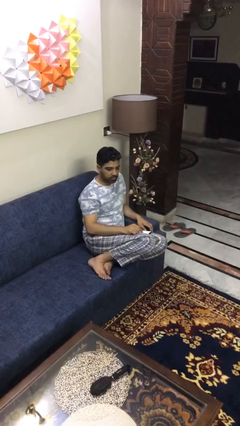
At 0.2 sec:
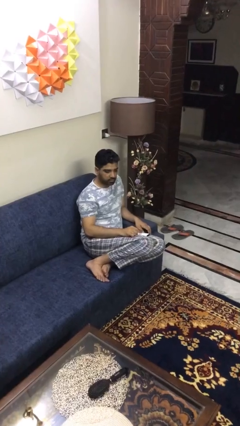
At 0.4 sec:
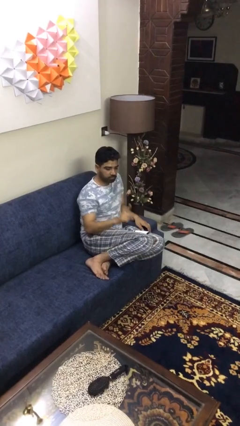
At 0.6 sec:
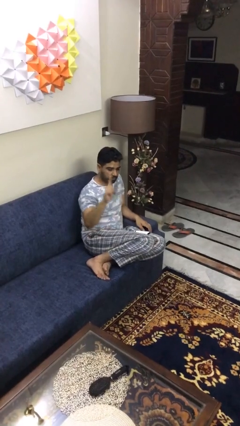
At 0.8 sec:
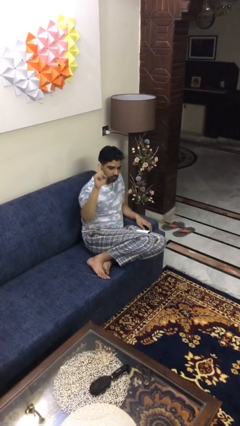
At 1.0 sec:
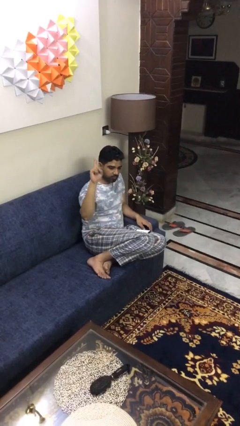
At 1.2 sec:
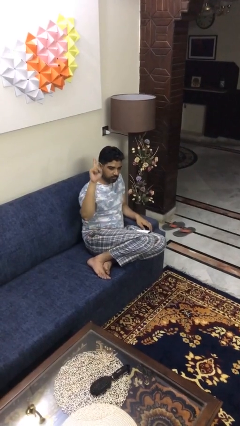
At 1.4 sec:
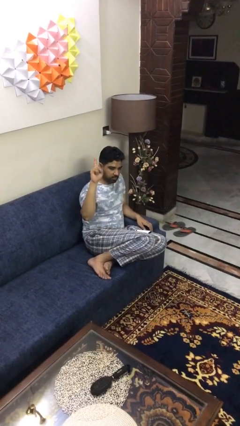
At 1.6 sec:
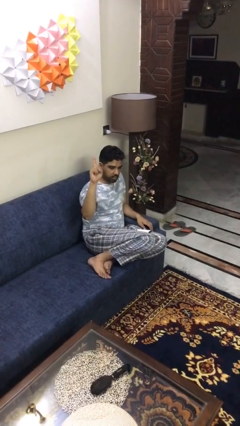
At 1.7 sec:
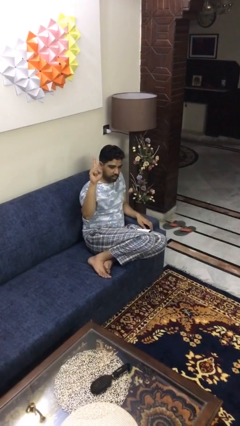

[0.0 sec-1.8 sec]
person gestures number one

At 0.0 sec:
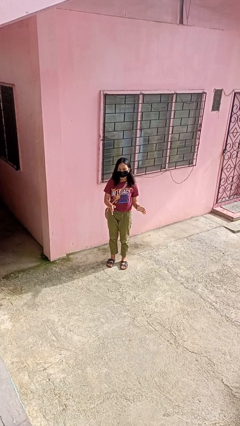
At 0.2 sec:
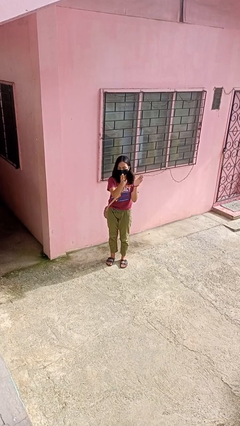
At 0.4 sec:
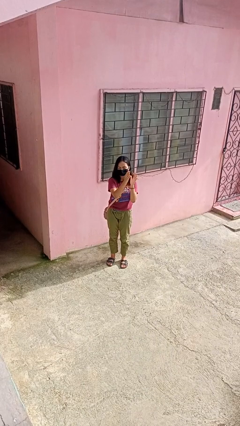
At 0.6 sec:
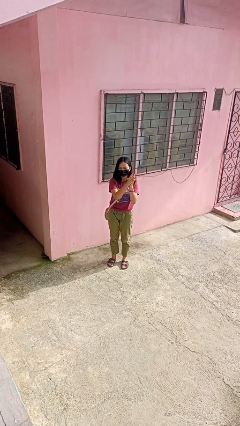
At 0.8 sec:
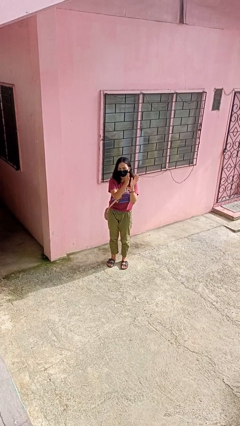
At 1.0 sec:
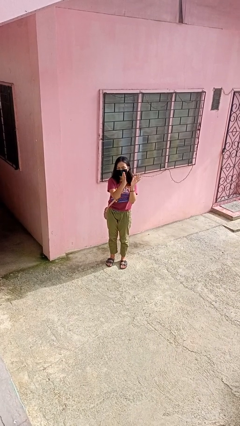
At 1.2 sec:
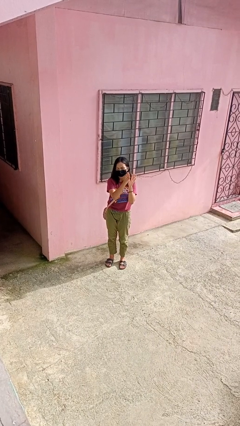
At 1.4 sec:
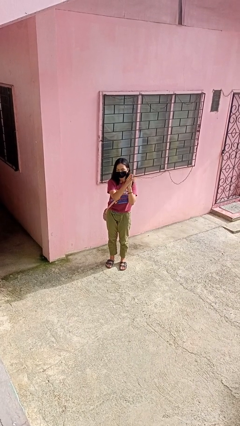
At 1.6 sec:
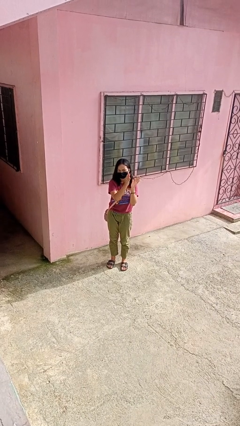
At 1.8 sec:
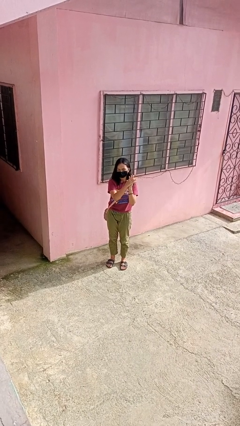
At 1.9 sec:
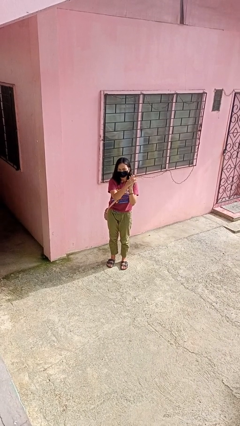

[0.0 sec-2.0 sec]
person claps hands

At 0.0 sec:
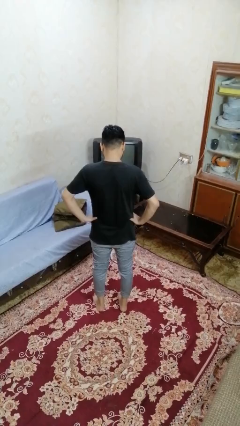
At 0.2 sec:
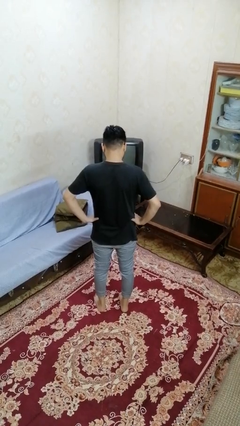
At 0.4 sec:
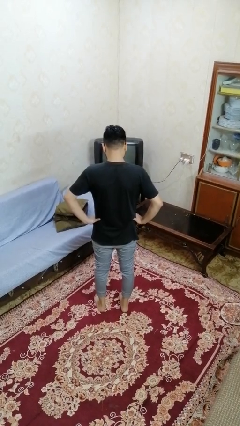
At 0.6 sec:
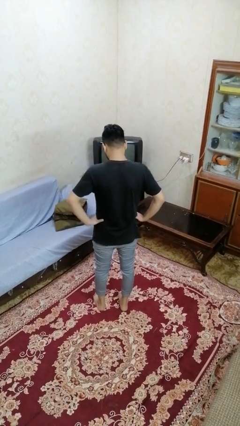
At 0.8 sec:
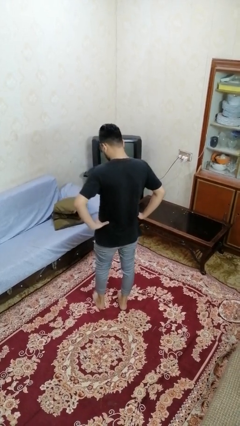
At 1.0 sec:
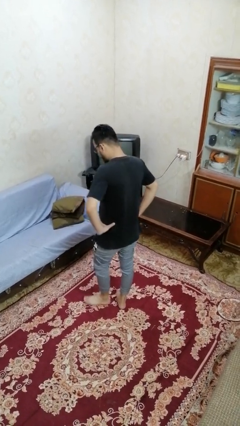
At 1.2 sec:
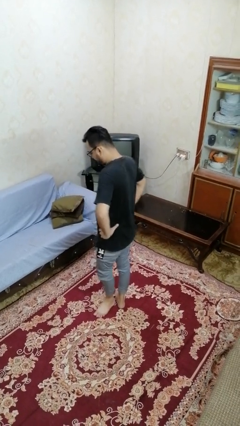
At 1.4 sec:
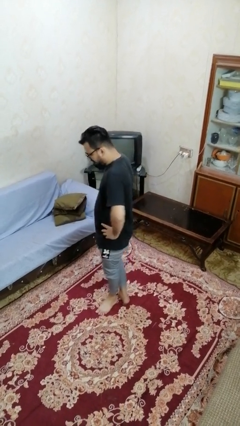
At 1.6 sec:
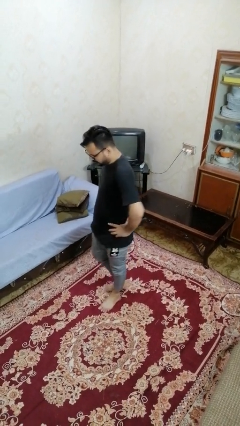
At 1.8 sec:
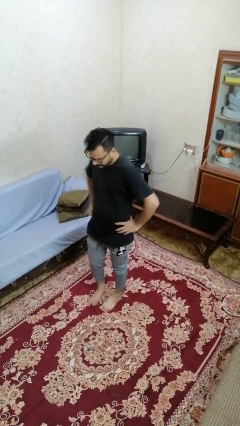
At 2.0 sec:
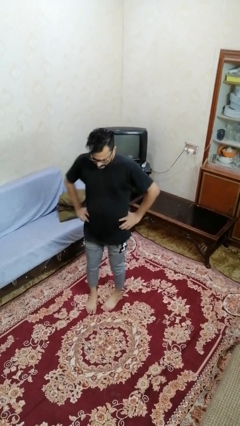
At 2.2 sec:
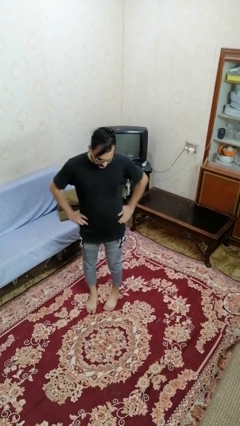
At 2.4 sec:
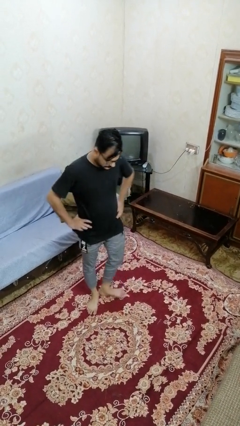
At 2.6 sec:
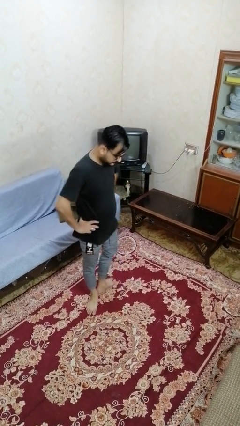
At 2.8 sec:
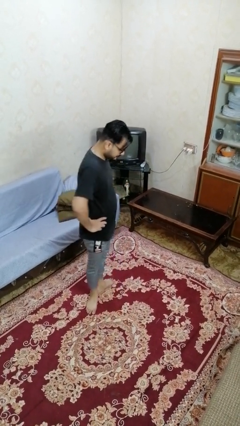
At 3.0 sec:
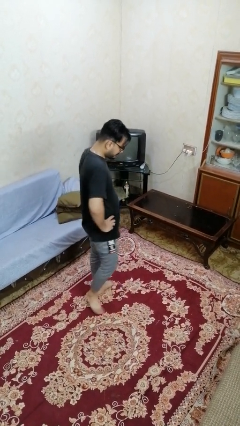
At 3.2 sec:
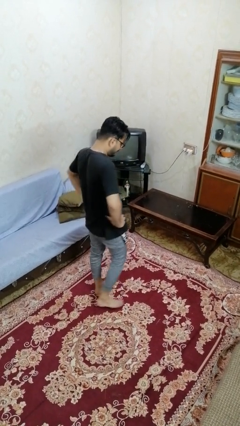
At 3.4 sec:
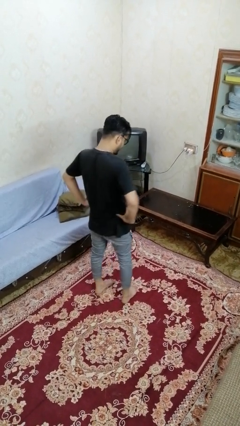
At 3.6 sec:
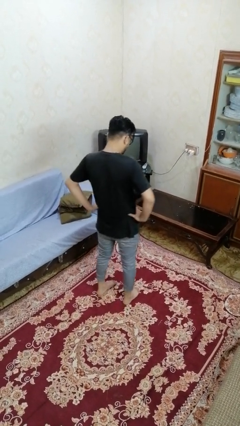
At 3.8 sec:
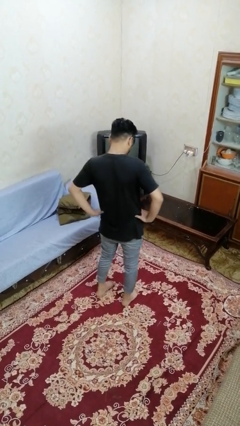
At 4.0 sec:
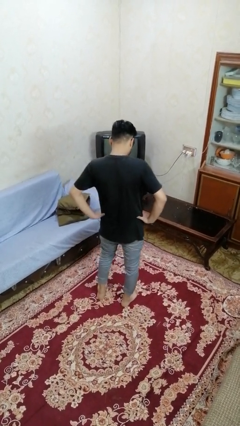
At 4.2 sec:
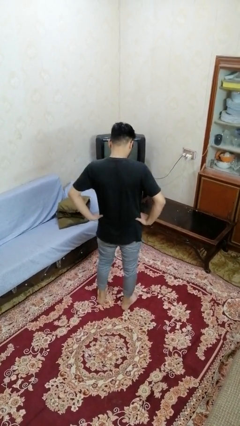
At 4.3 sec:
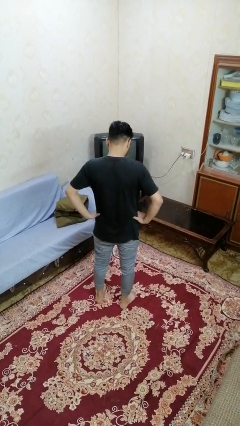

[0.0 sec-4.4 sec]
person twirls

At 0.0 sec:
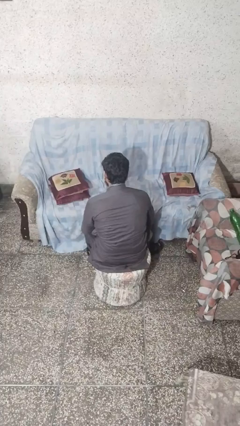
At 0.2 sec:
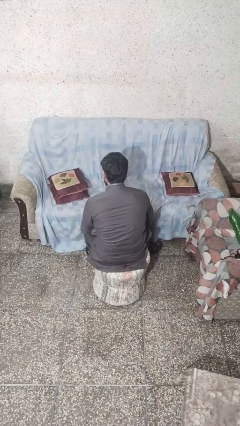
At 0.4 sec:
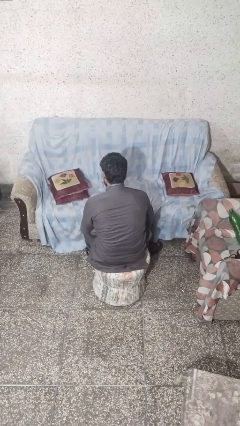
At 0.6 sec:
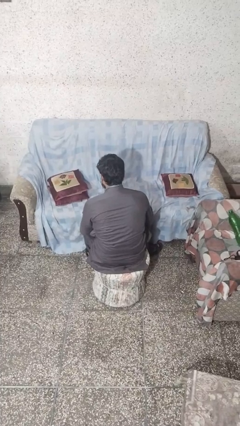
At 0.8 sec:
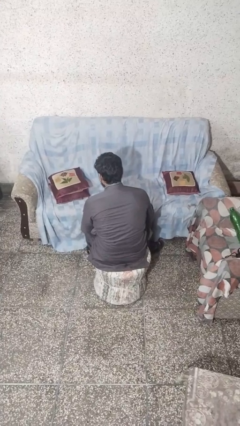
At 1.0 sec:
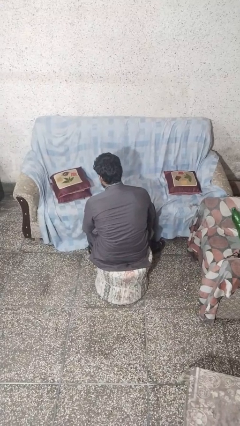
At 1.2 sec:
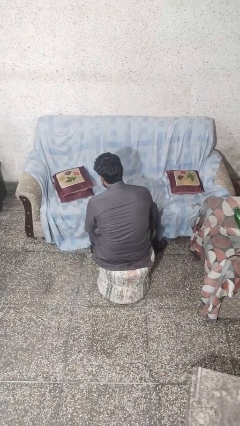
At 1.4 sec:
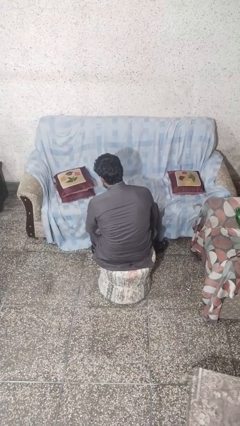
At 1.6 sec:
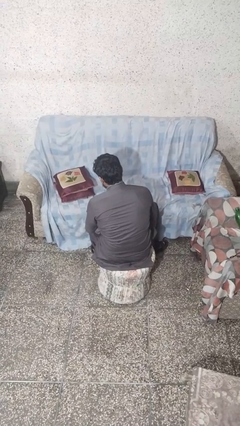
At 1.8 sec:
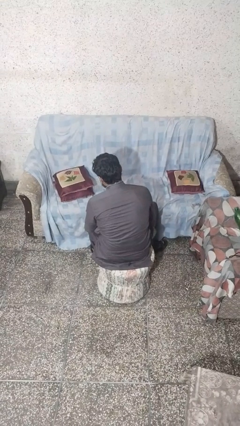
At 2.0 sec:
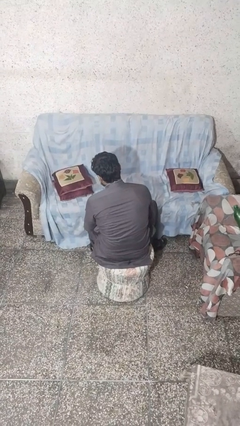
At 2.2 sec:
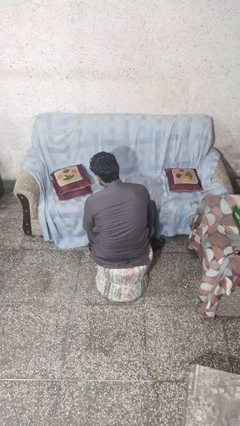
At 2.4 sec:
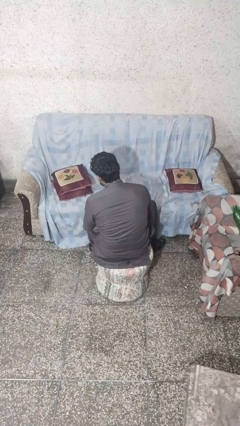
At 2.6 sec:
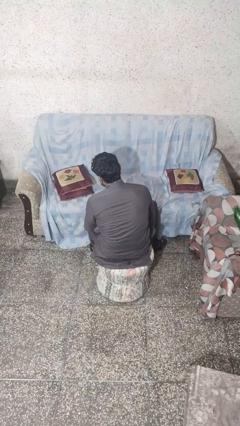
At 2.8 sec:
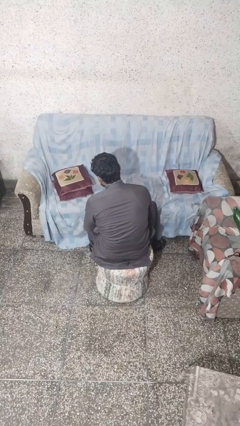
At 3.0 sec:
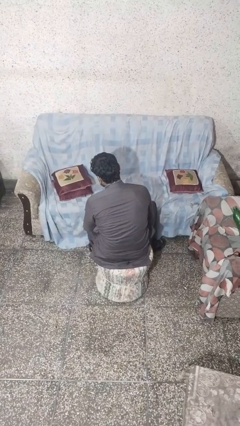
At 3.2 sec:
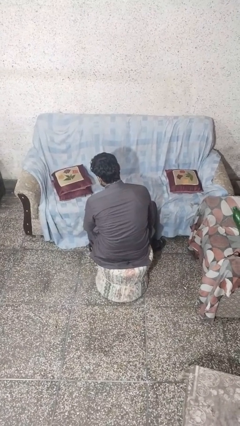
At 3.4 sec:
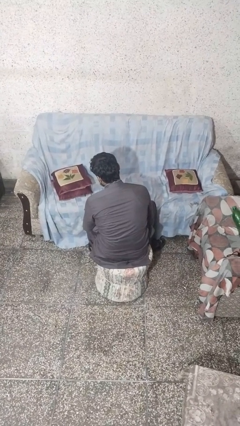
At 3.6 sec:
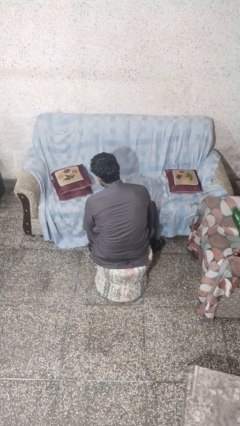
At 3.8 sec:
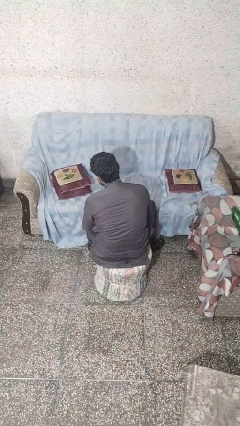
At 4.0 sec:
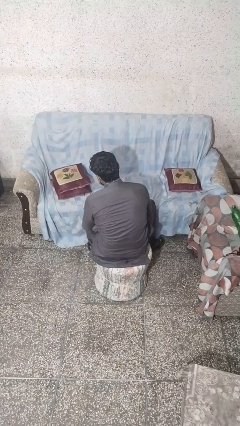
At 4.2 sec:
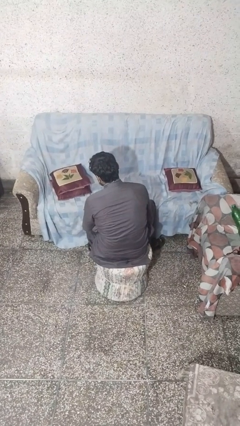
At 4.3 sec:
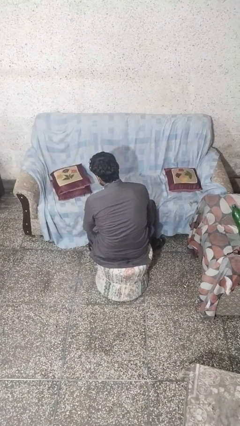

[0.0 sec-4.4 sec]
person stirs mug

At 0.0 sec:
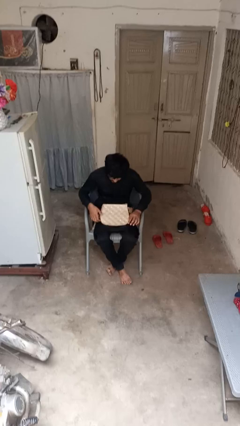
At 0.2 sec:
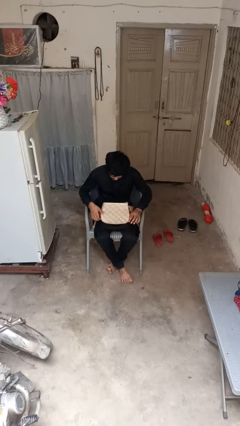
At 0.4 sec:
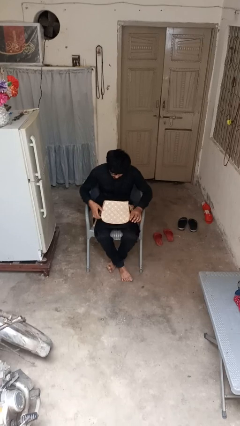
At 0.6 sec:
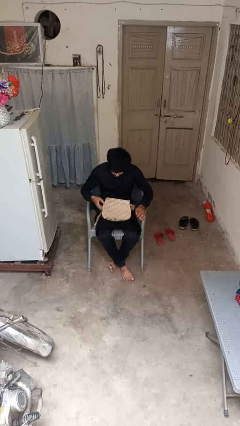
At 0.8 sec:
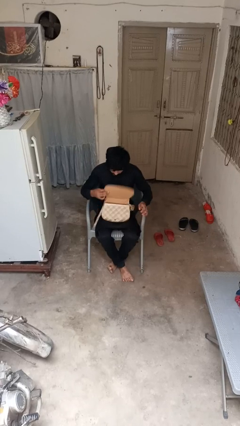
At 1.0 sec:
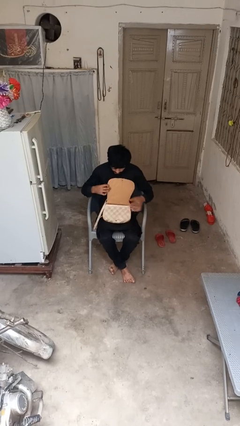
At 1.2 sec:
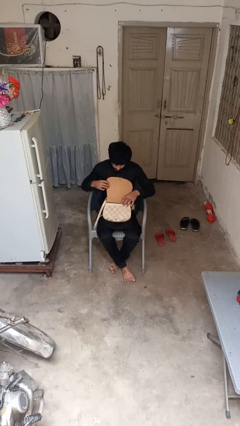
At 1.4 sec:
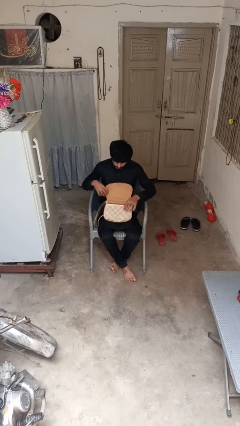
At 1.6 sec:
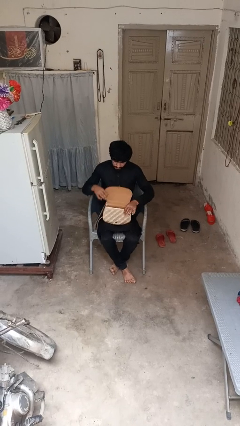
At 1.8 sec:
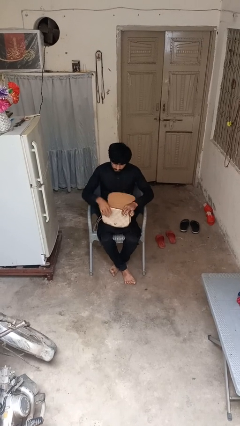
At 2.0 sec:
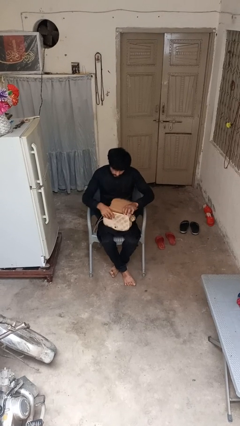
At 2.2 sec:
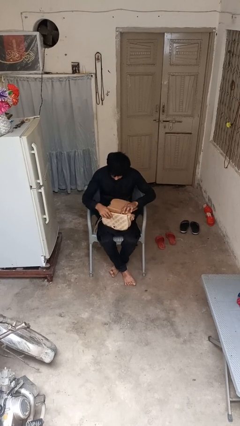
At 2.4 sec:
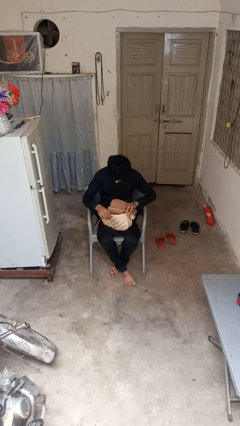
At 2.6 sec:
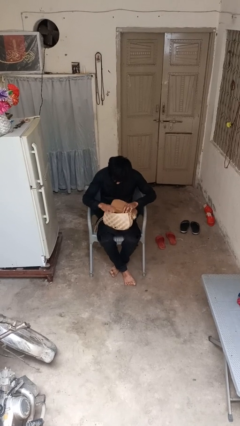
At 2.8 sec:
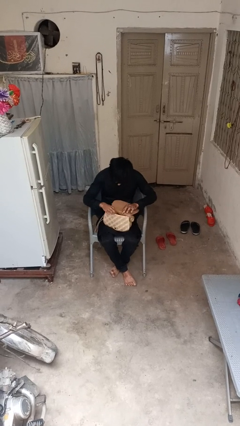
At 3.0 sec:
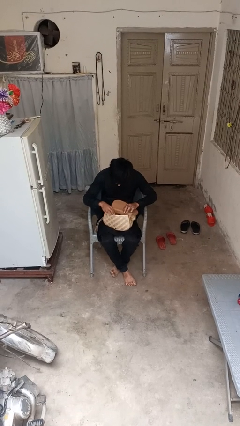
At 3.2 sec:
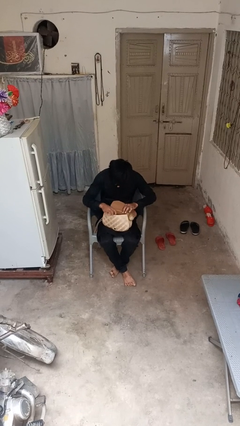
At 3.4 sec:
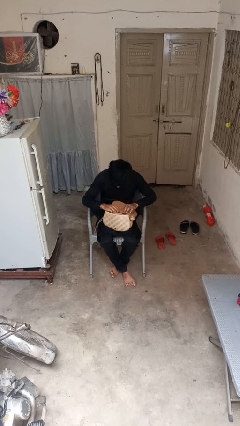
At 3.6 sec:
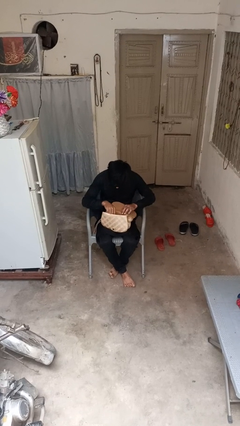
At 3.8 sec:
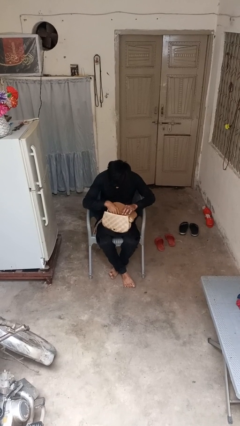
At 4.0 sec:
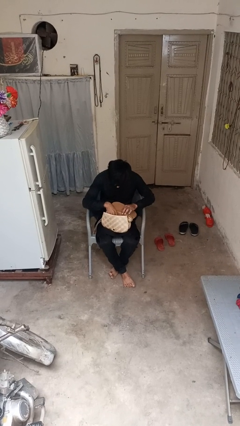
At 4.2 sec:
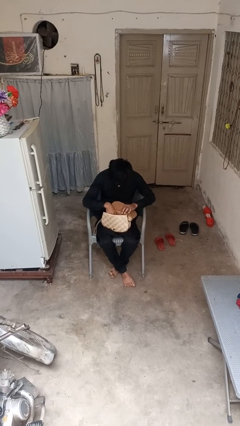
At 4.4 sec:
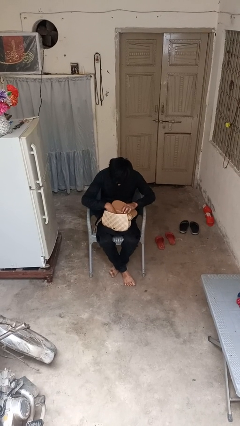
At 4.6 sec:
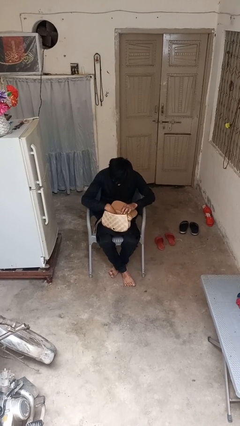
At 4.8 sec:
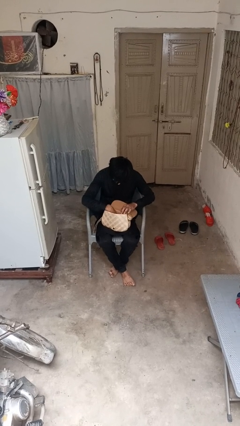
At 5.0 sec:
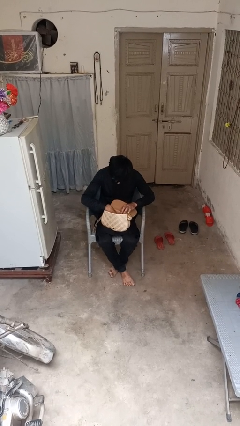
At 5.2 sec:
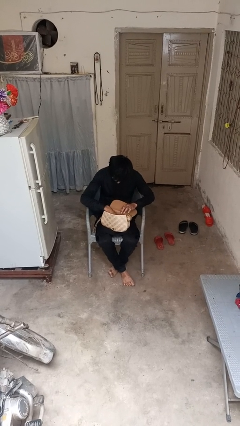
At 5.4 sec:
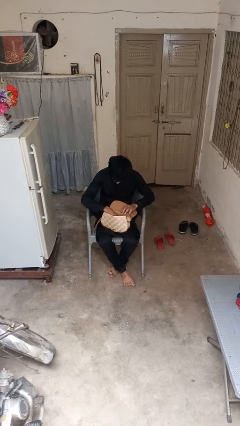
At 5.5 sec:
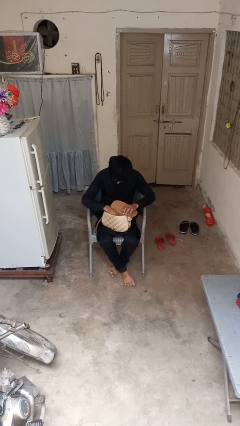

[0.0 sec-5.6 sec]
person searches in purse
